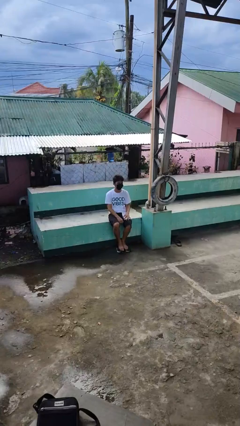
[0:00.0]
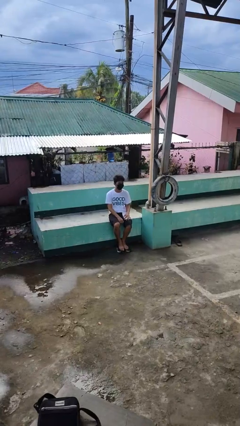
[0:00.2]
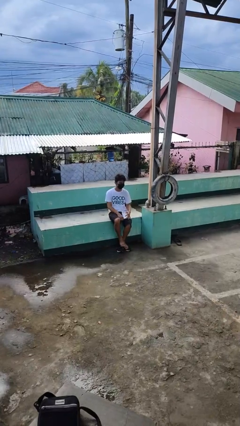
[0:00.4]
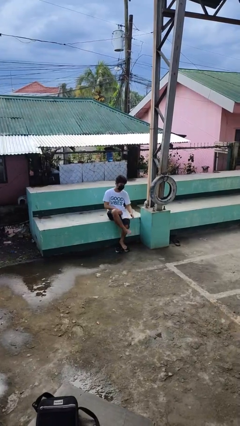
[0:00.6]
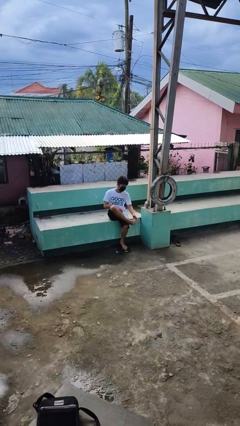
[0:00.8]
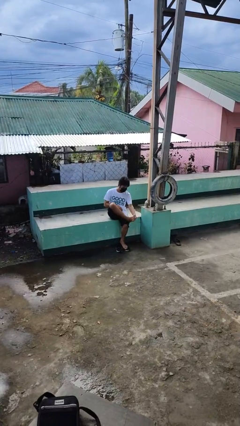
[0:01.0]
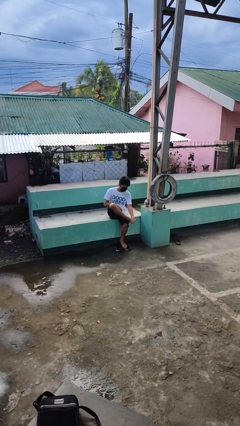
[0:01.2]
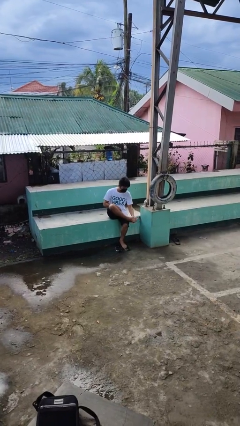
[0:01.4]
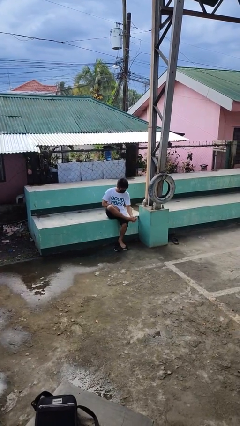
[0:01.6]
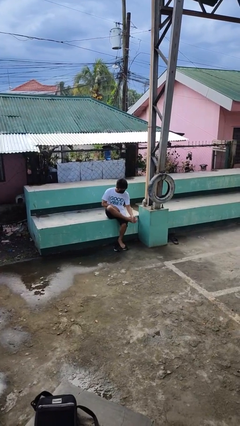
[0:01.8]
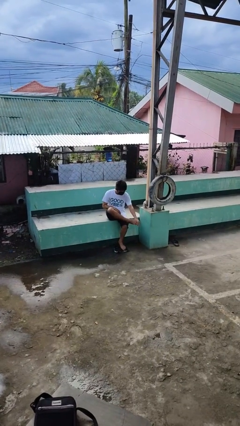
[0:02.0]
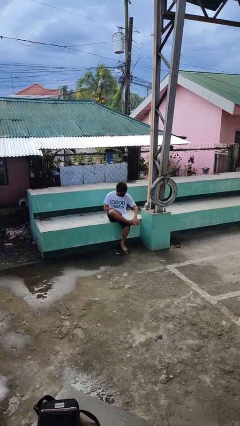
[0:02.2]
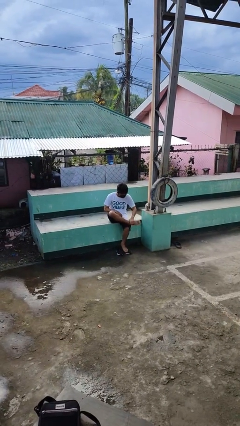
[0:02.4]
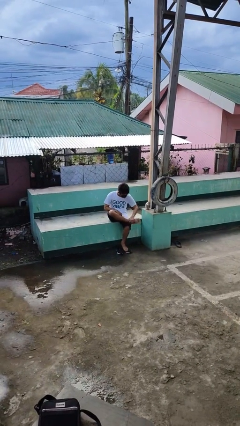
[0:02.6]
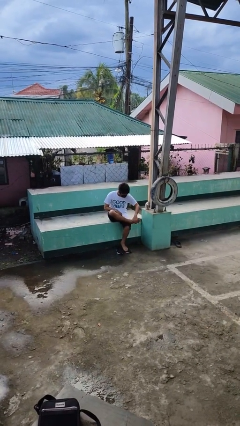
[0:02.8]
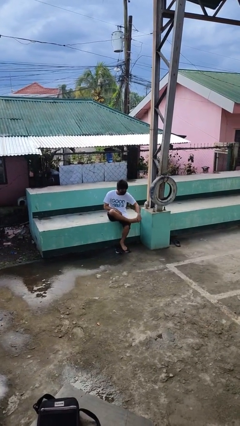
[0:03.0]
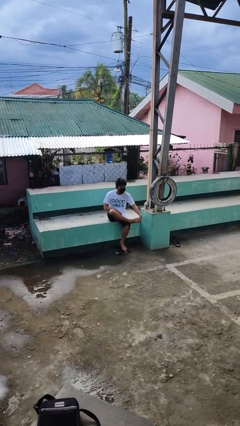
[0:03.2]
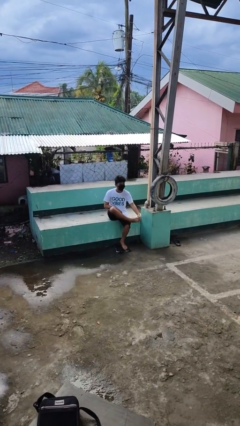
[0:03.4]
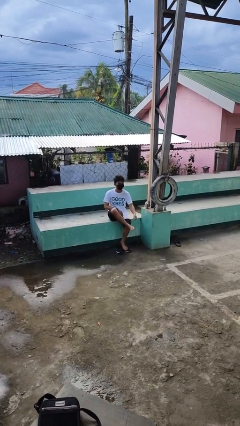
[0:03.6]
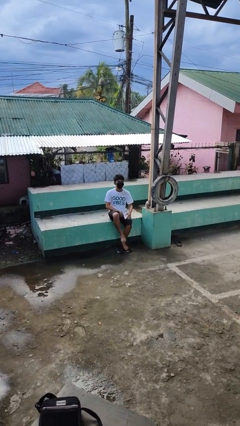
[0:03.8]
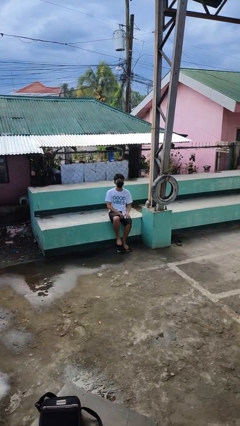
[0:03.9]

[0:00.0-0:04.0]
person rubs foot

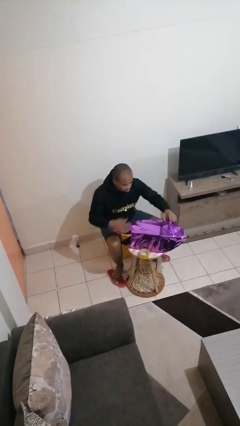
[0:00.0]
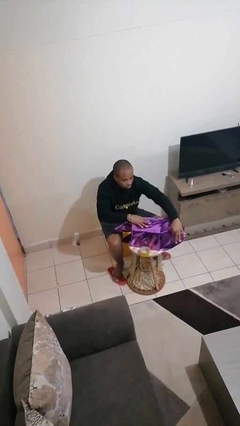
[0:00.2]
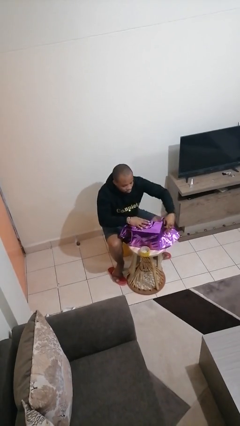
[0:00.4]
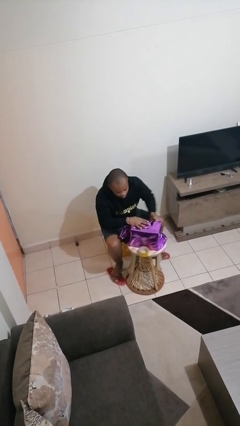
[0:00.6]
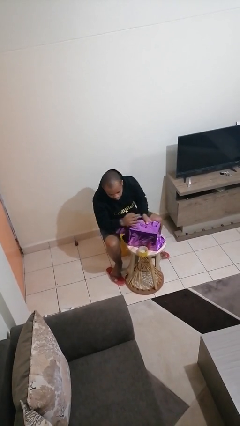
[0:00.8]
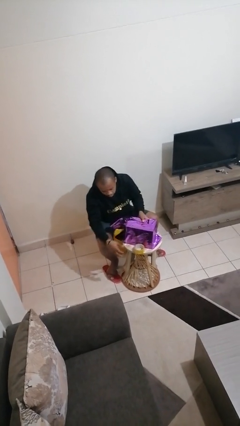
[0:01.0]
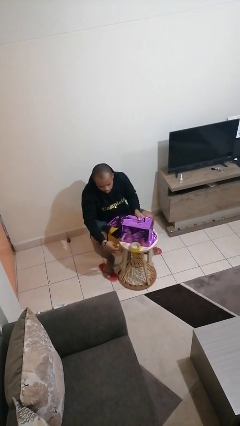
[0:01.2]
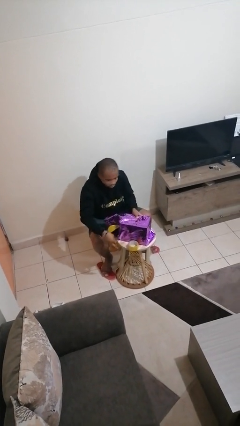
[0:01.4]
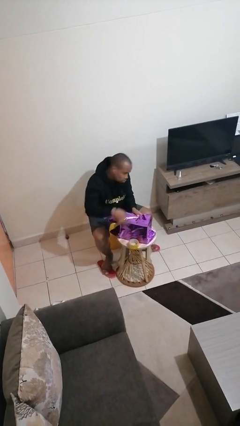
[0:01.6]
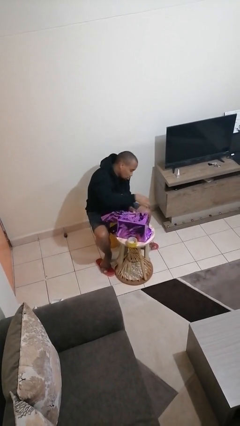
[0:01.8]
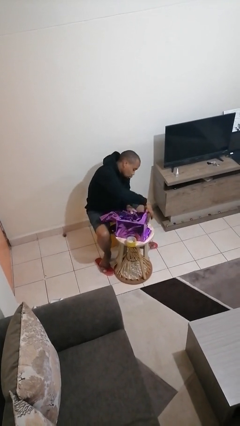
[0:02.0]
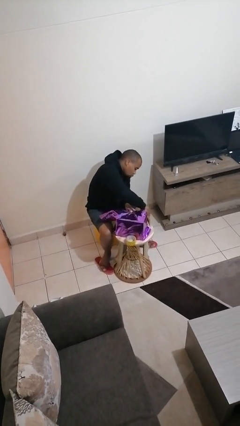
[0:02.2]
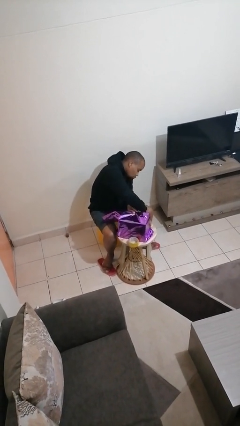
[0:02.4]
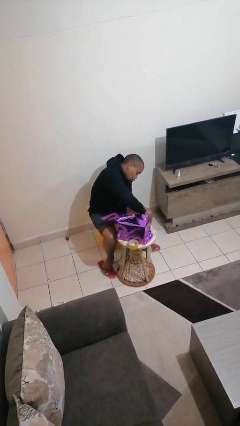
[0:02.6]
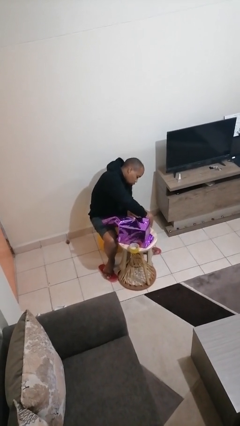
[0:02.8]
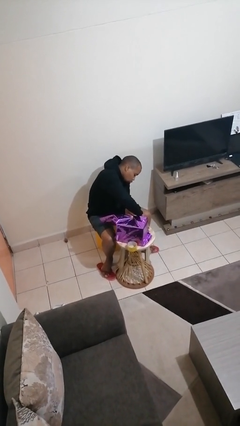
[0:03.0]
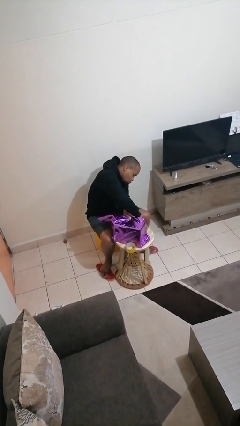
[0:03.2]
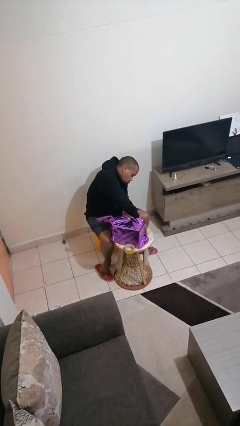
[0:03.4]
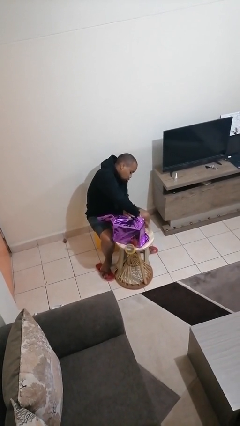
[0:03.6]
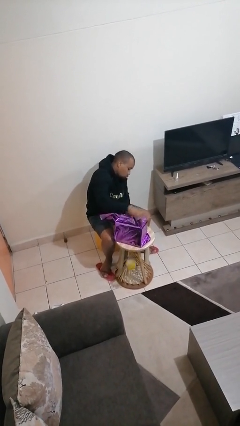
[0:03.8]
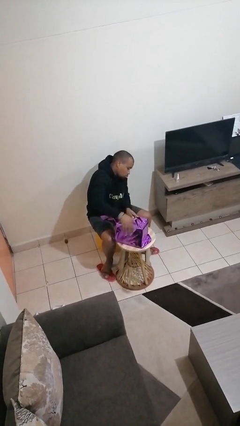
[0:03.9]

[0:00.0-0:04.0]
person wraps box

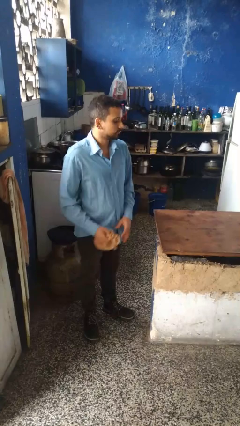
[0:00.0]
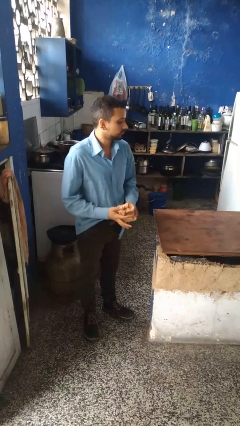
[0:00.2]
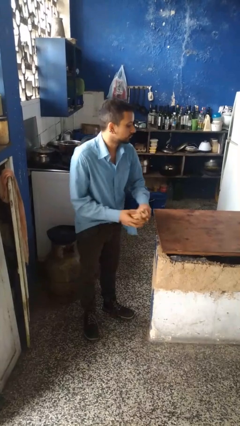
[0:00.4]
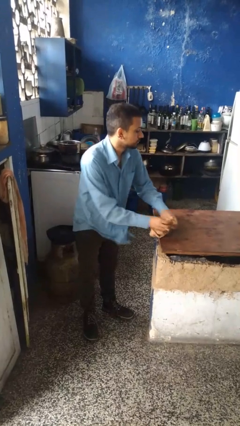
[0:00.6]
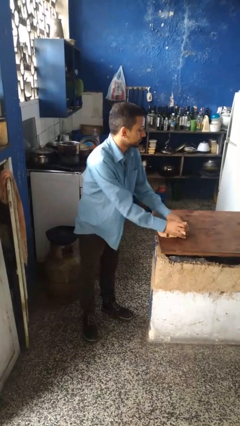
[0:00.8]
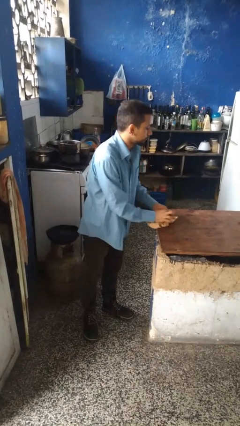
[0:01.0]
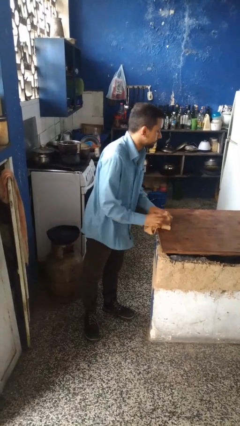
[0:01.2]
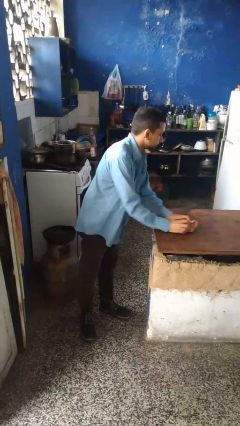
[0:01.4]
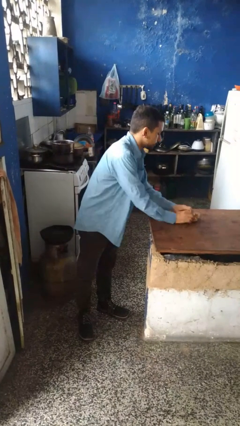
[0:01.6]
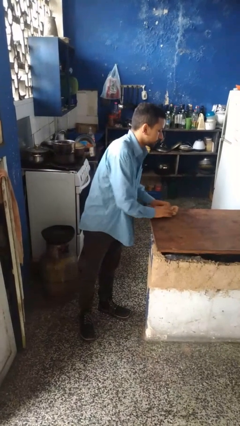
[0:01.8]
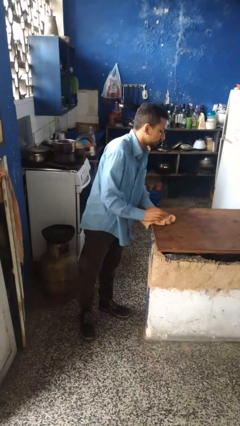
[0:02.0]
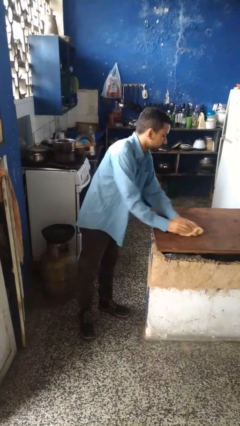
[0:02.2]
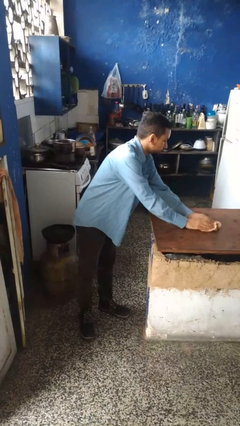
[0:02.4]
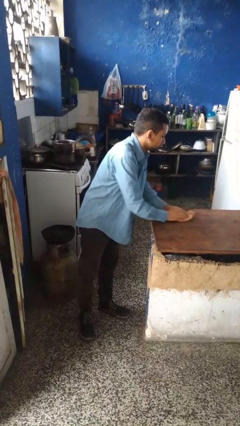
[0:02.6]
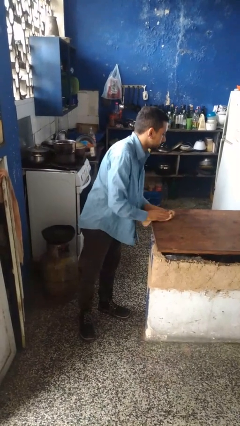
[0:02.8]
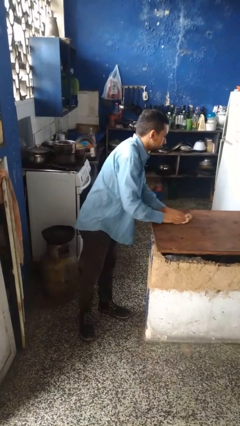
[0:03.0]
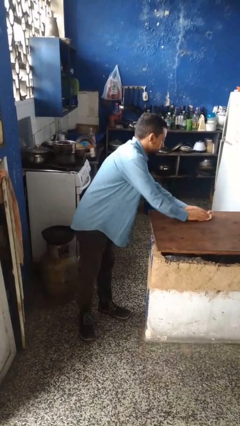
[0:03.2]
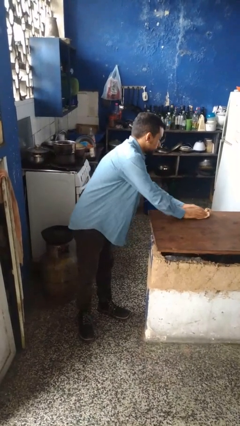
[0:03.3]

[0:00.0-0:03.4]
person cleans table with rag

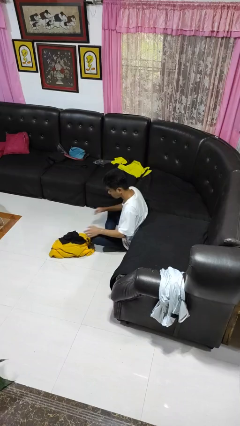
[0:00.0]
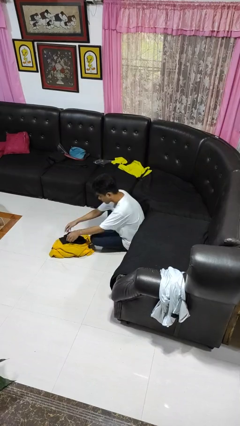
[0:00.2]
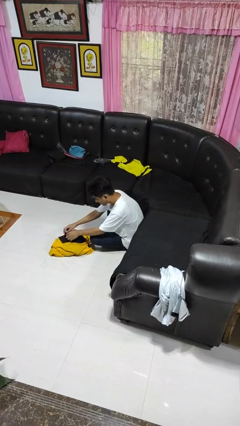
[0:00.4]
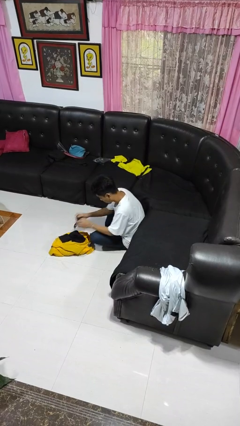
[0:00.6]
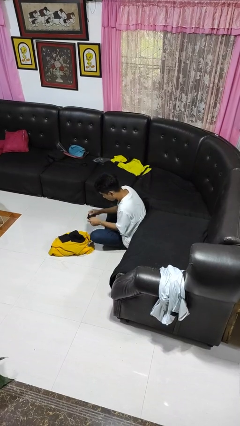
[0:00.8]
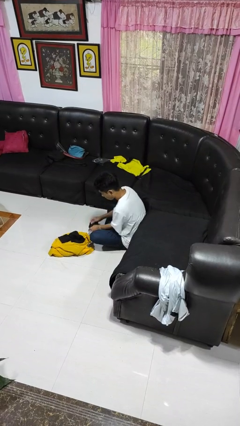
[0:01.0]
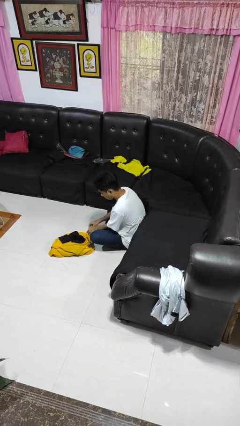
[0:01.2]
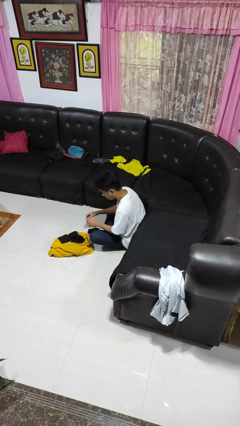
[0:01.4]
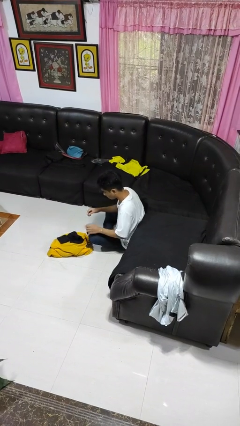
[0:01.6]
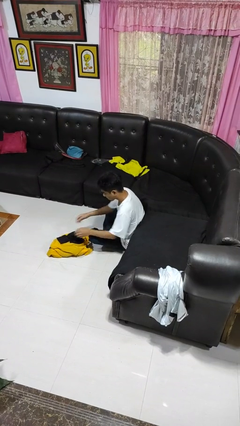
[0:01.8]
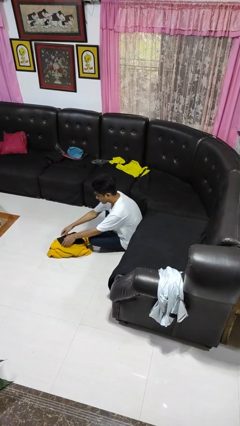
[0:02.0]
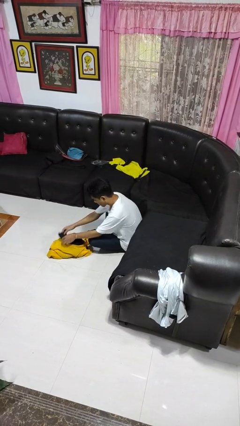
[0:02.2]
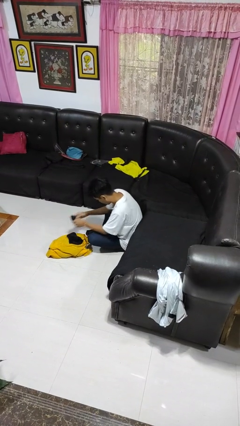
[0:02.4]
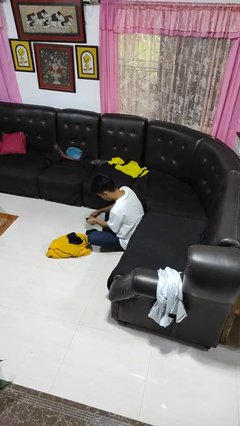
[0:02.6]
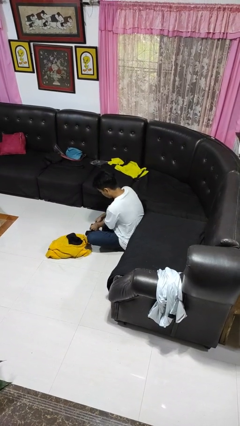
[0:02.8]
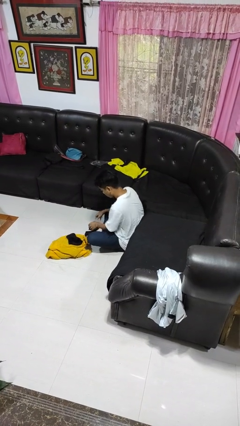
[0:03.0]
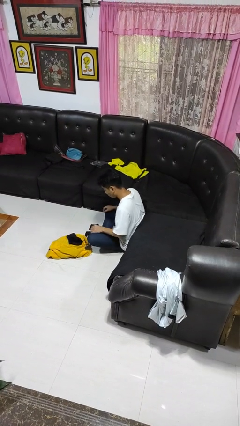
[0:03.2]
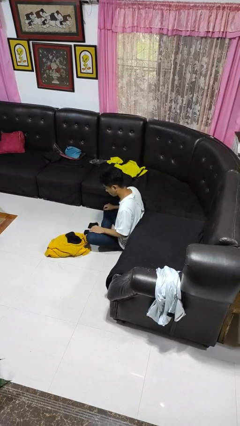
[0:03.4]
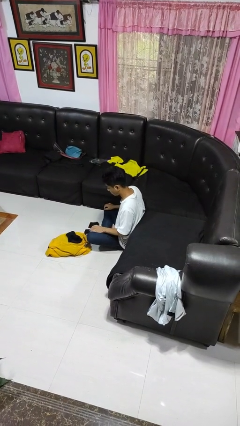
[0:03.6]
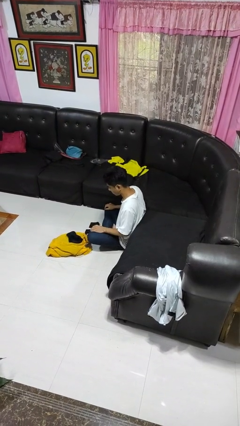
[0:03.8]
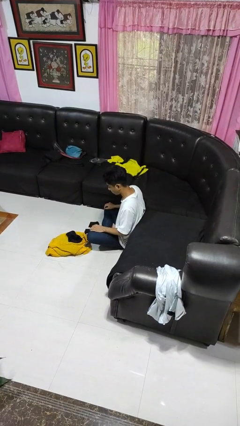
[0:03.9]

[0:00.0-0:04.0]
person folds socks

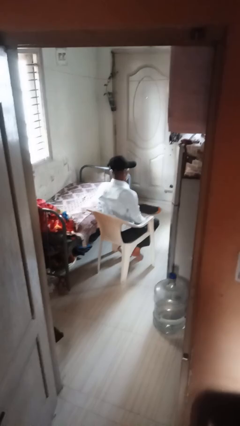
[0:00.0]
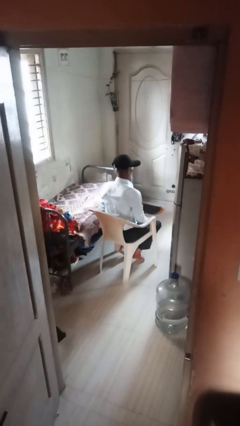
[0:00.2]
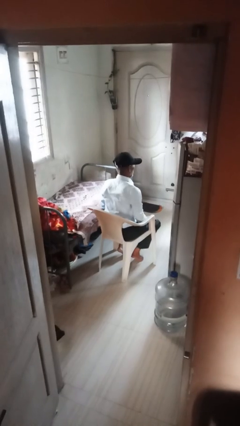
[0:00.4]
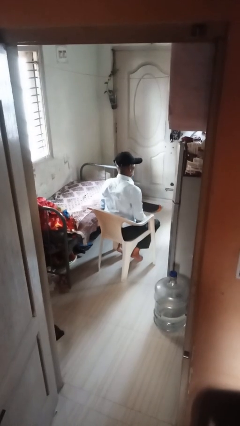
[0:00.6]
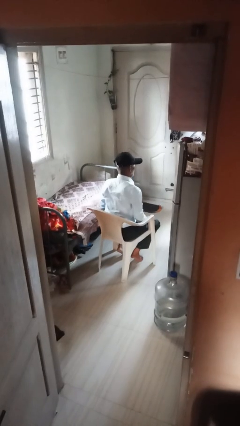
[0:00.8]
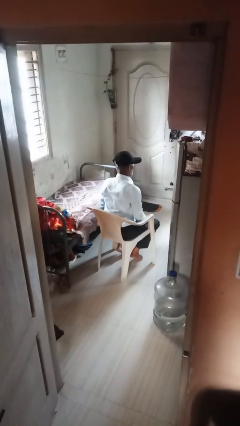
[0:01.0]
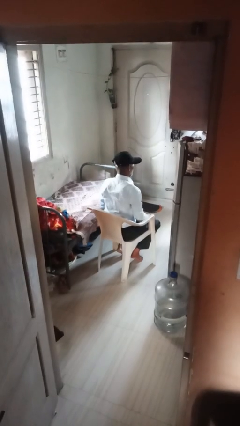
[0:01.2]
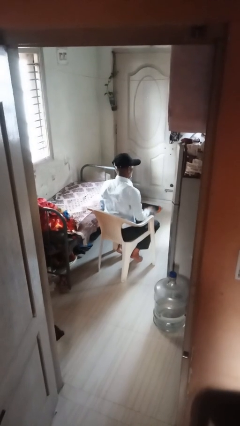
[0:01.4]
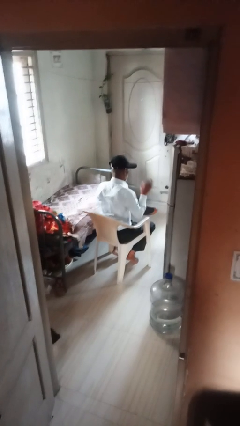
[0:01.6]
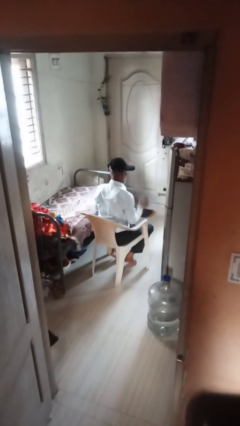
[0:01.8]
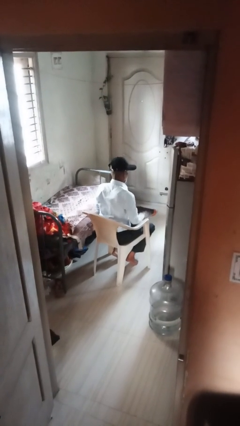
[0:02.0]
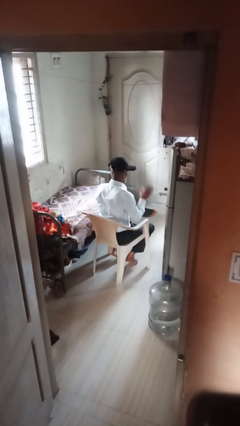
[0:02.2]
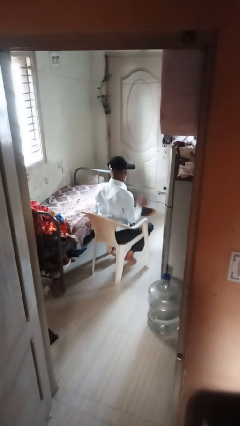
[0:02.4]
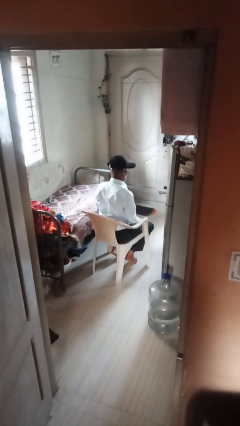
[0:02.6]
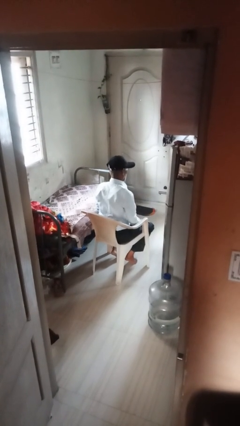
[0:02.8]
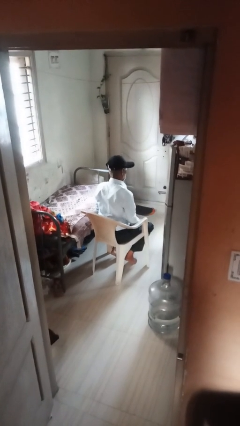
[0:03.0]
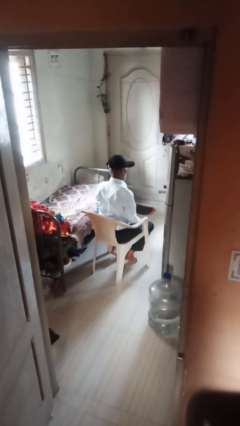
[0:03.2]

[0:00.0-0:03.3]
person slaps hands on thighs
